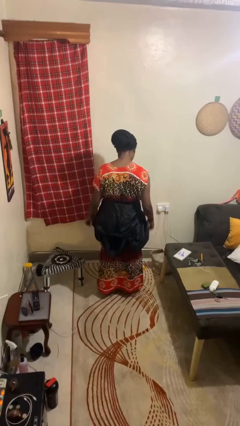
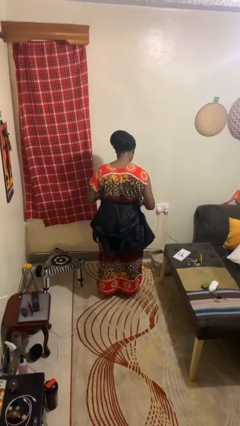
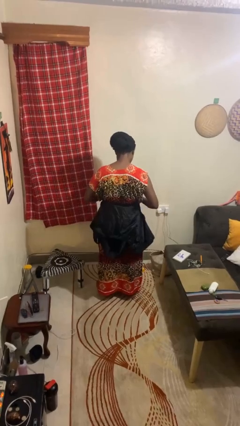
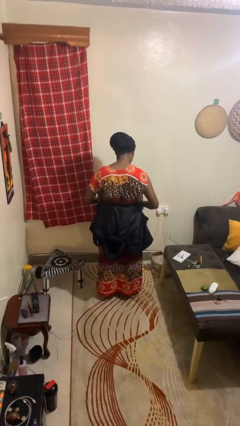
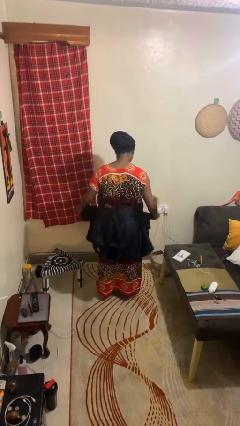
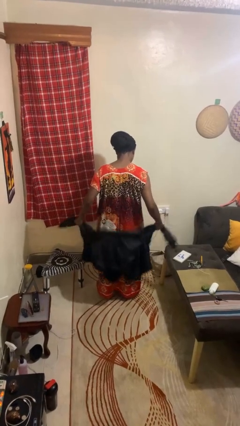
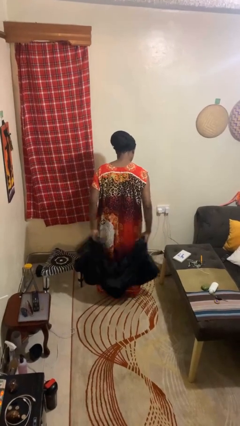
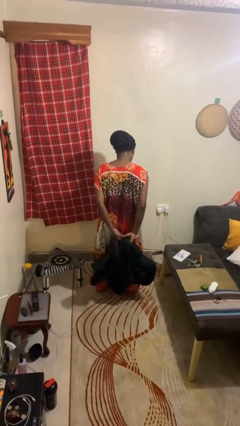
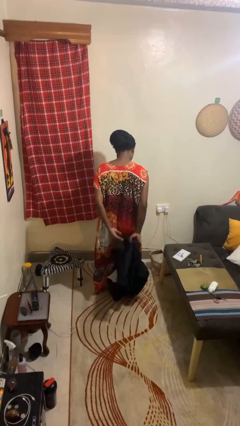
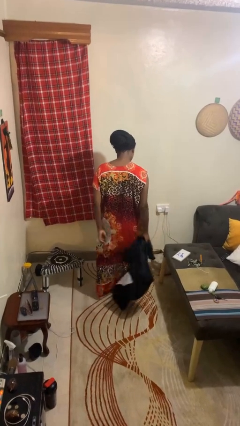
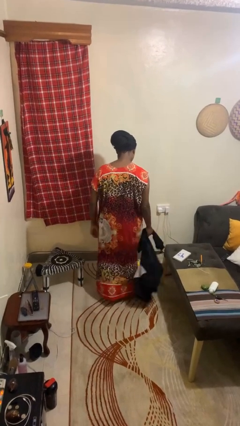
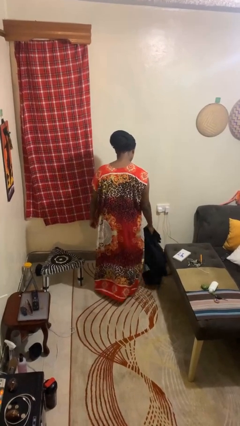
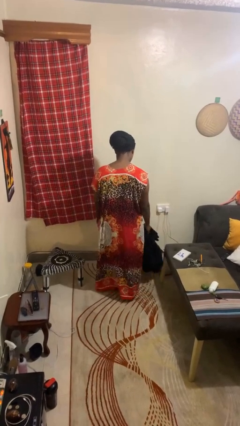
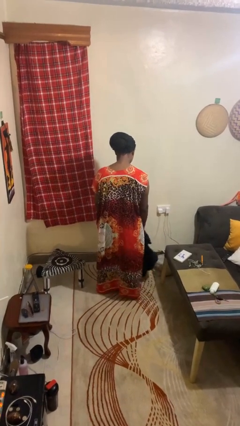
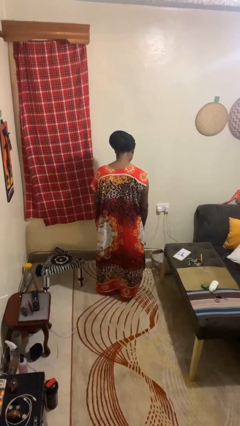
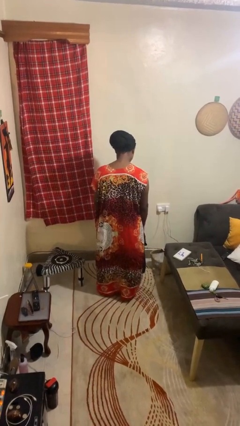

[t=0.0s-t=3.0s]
person unties jacket around waist

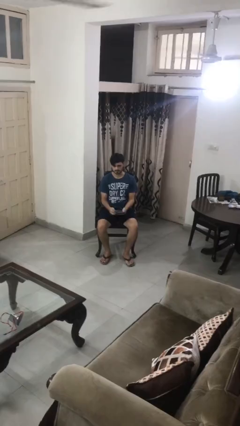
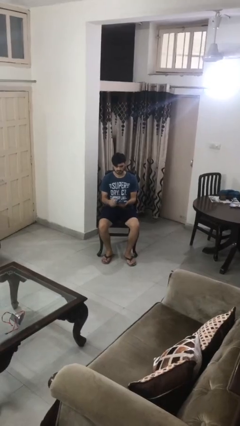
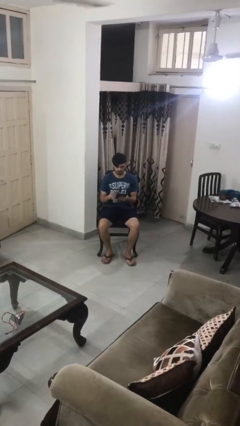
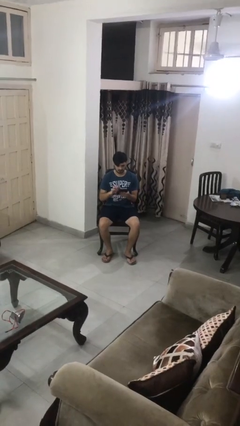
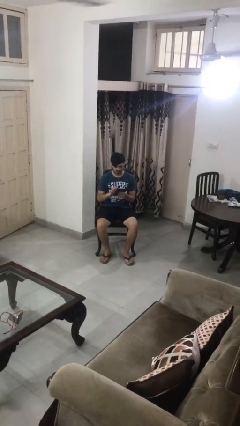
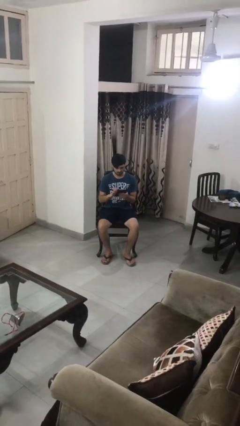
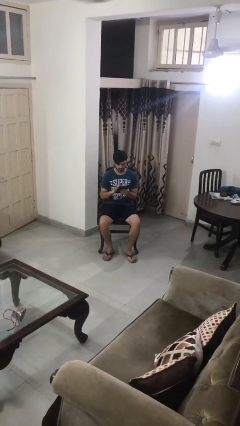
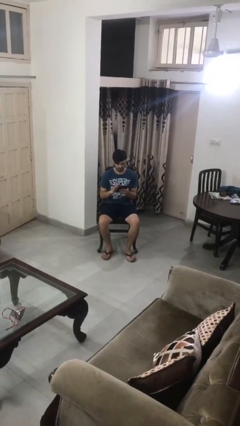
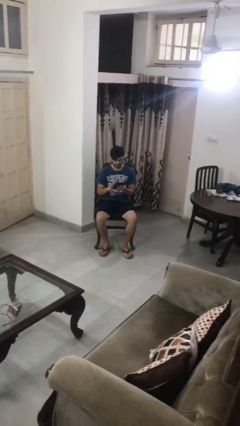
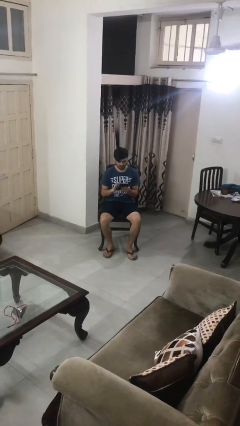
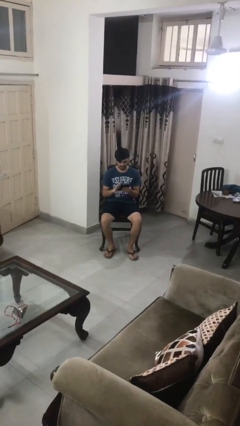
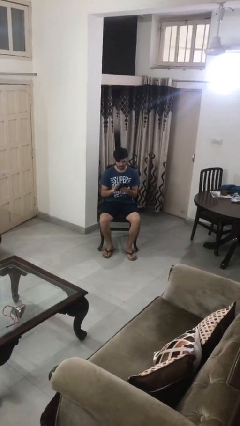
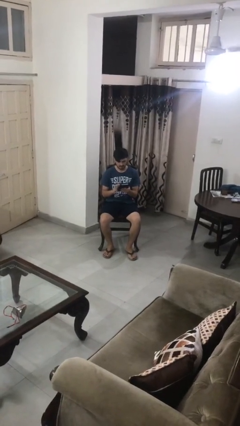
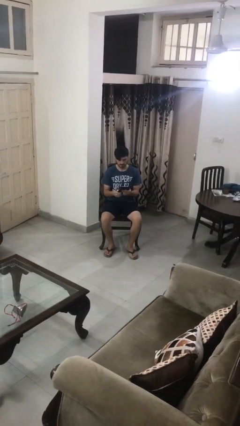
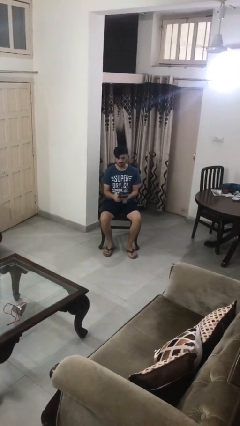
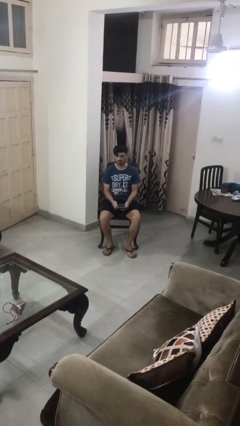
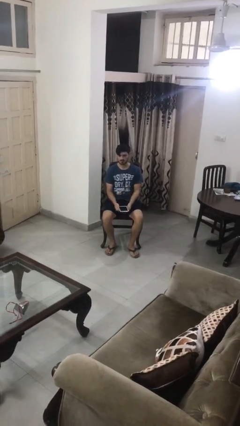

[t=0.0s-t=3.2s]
person interacts with tablet

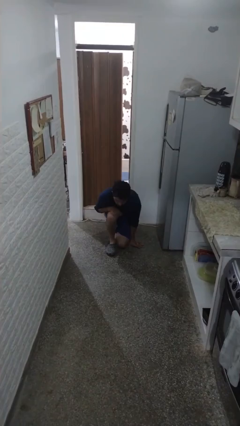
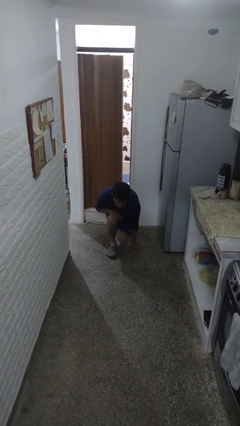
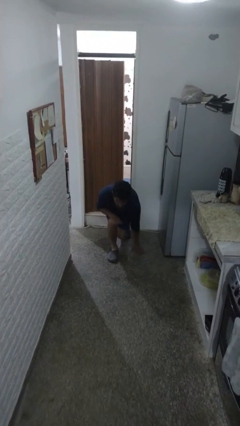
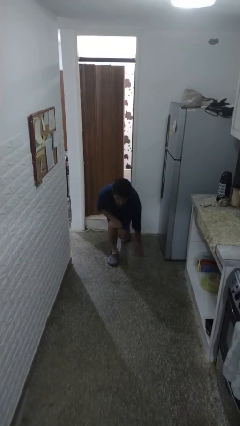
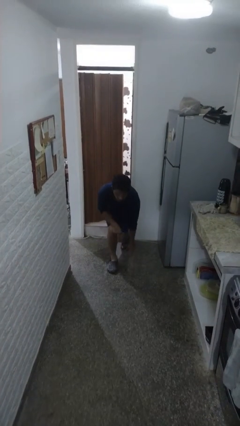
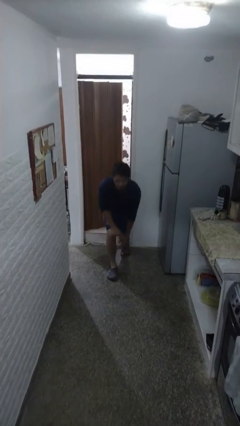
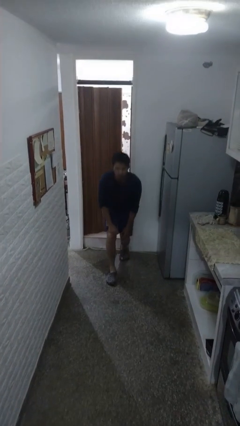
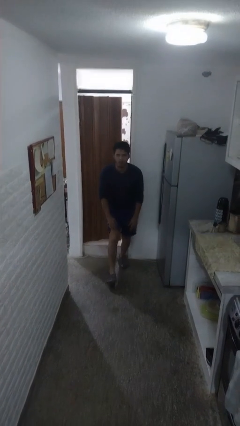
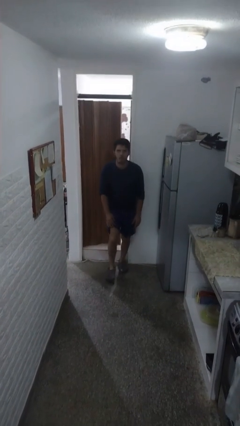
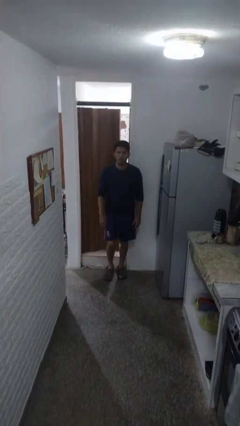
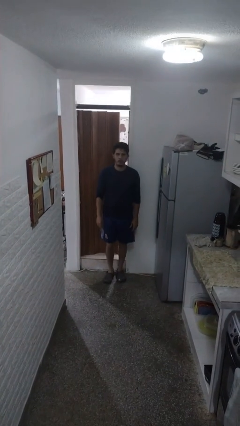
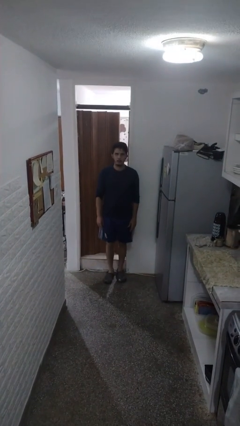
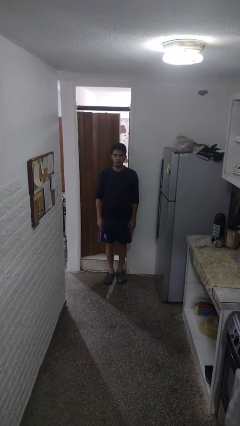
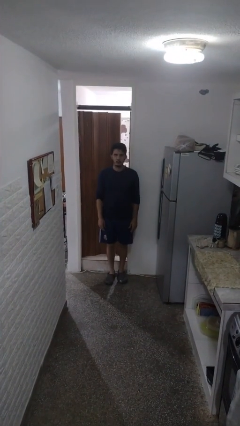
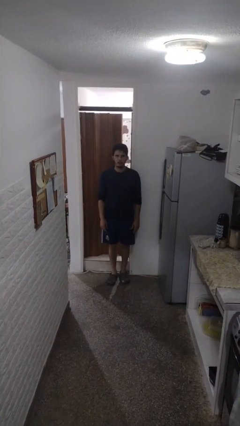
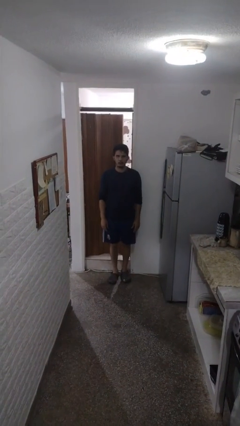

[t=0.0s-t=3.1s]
person stands up from floor

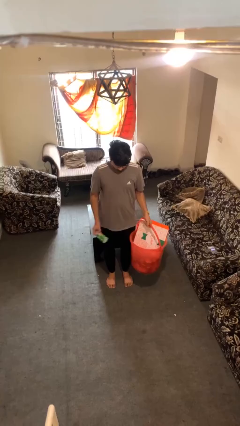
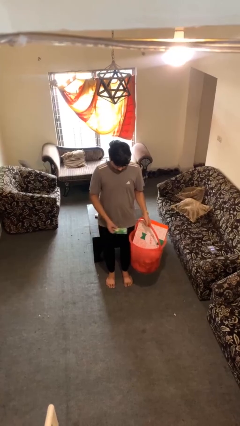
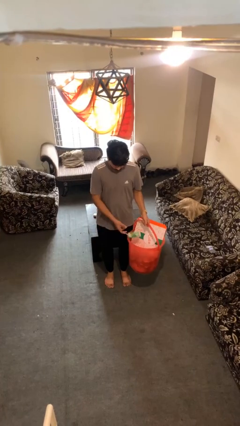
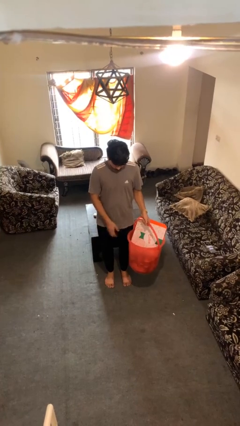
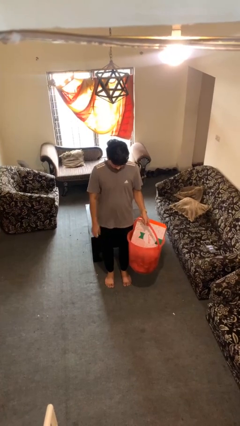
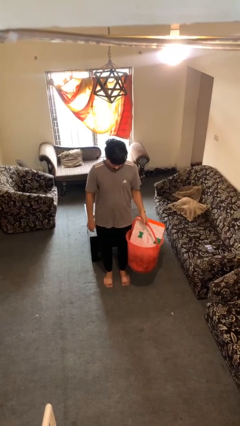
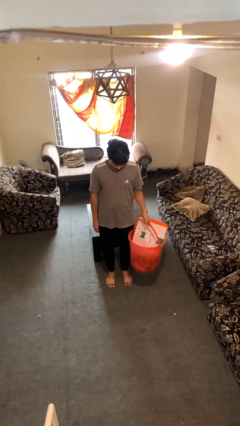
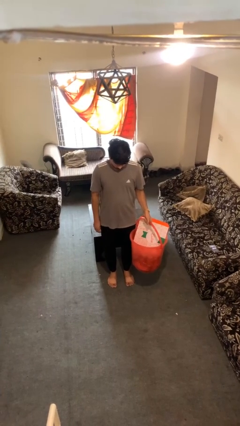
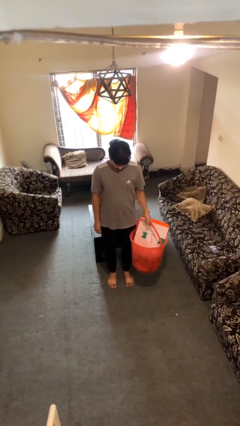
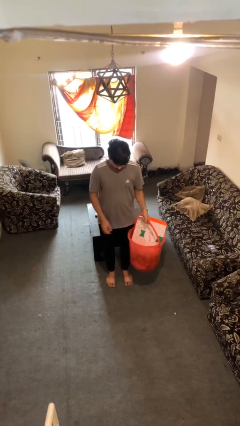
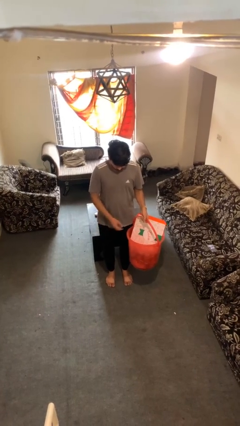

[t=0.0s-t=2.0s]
person puts object into basket

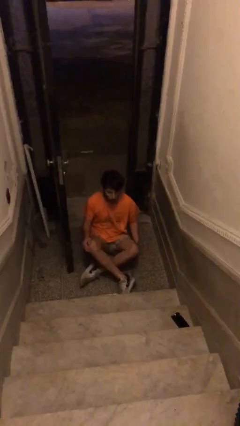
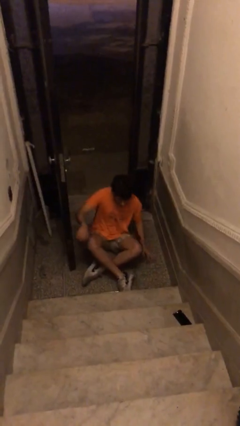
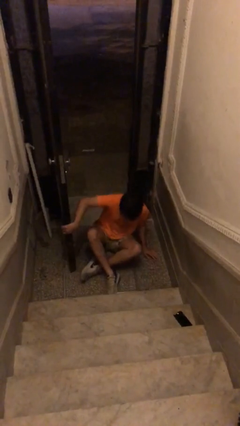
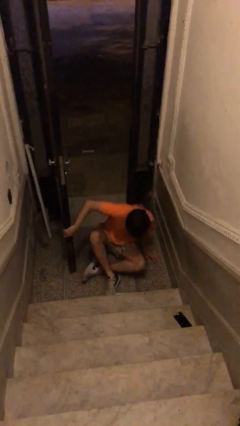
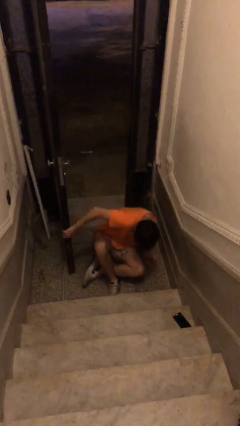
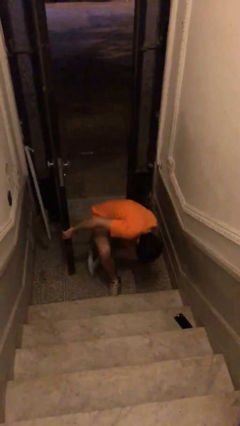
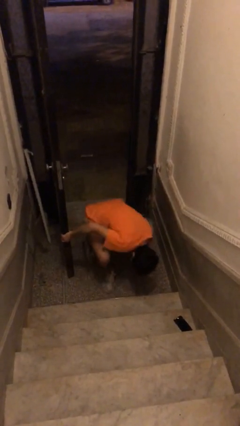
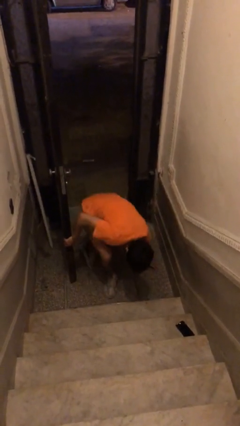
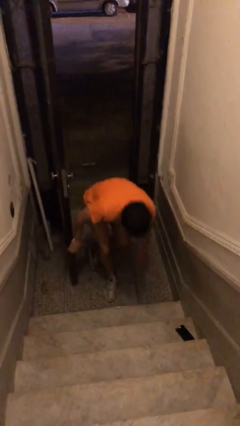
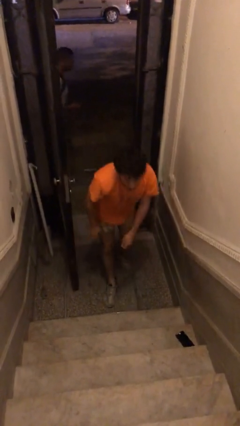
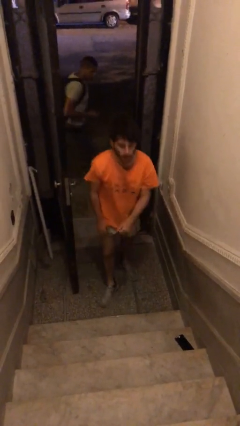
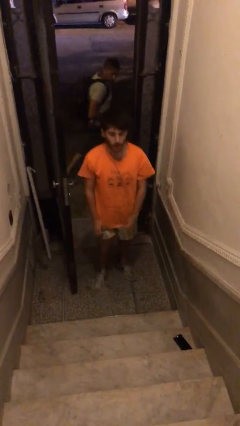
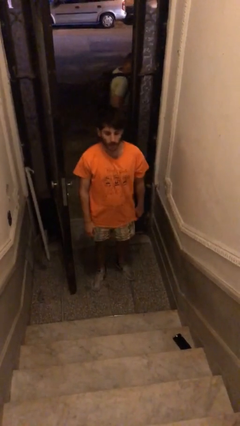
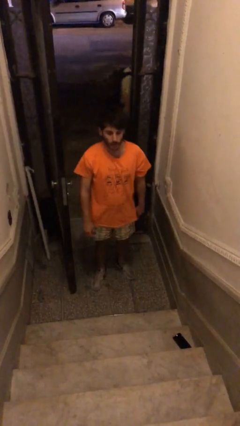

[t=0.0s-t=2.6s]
person stands up

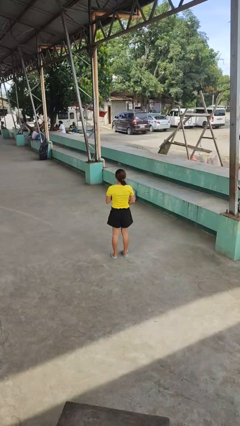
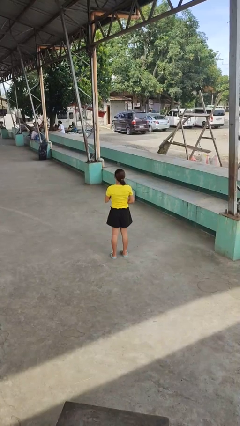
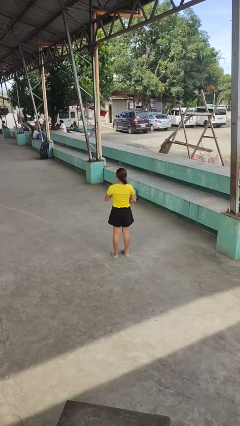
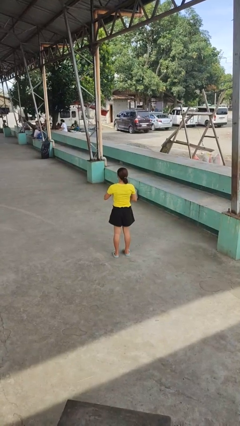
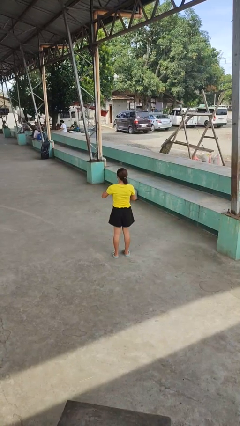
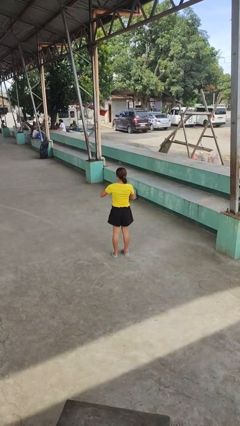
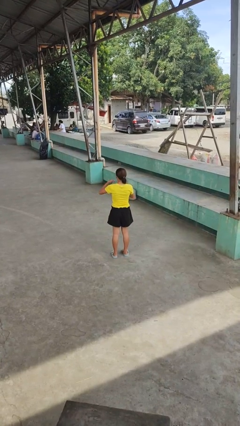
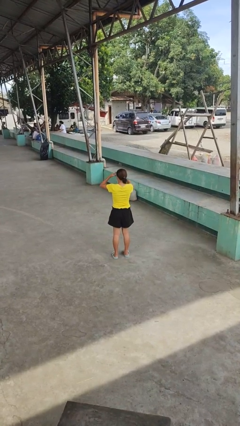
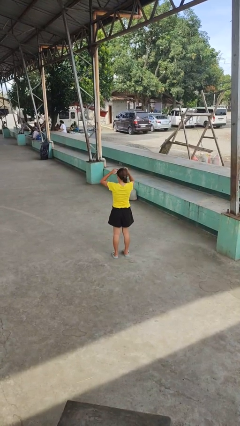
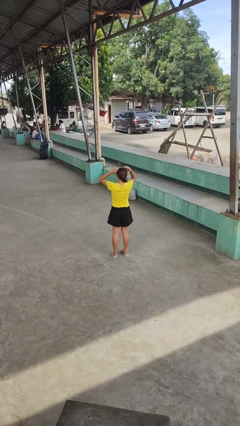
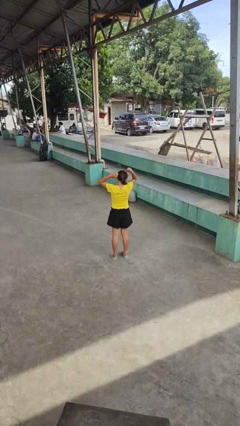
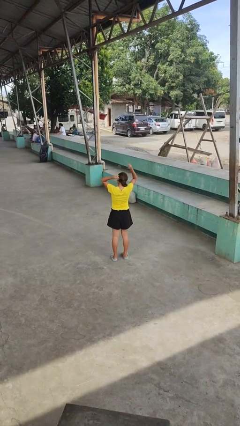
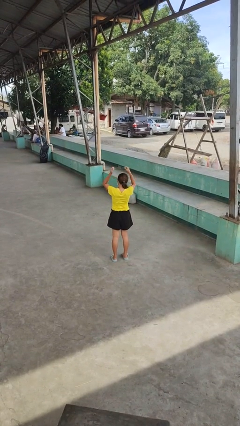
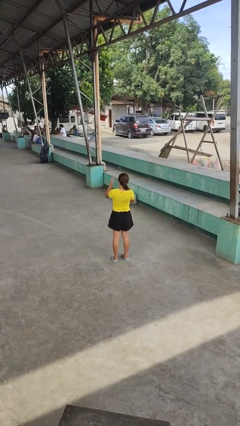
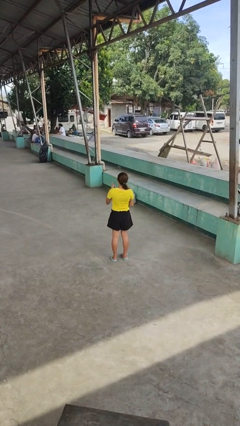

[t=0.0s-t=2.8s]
person takes off necklace

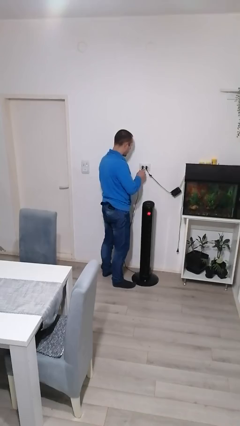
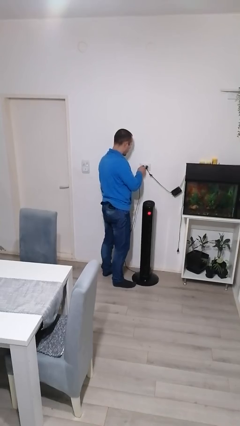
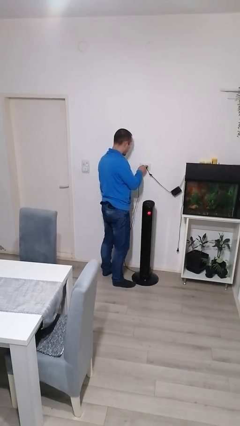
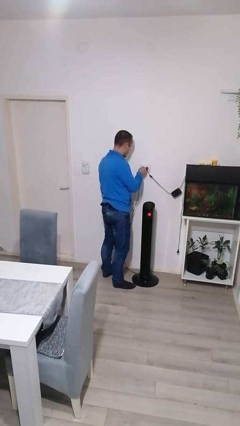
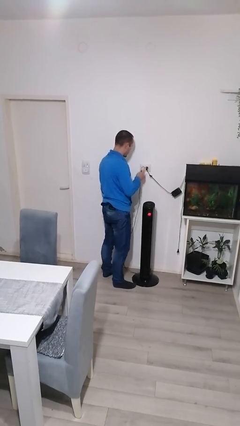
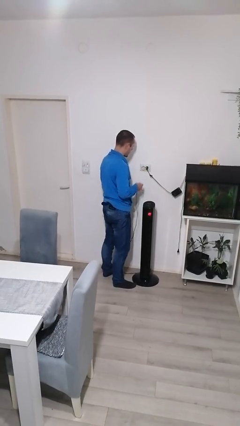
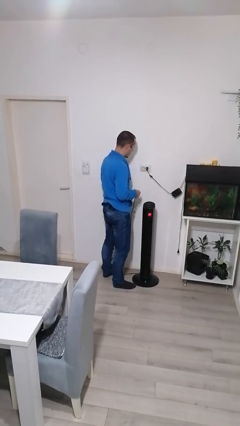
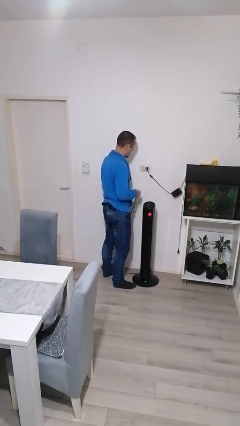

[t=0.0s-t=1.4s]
person unplugs from electrical socket
